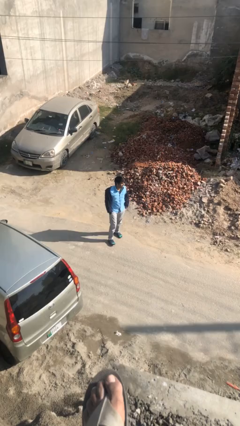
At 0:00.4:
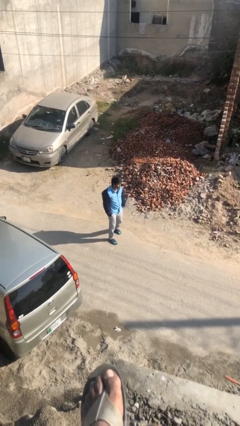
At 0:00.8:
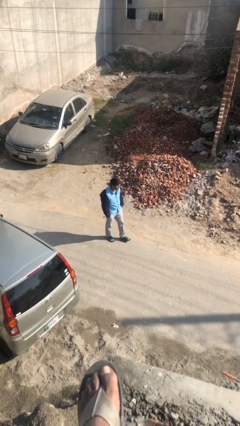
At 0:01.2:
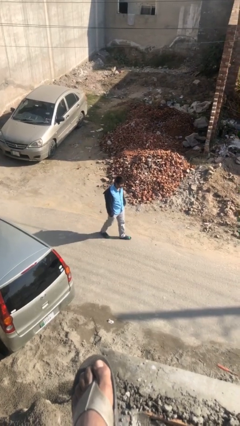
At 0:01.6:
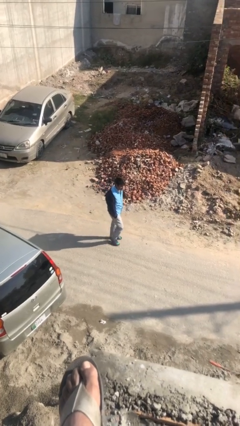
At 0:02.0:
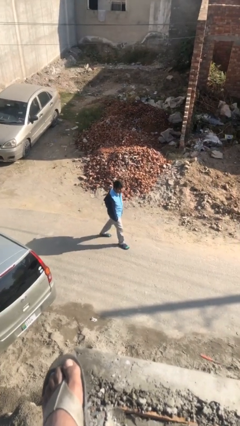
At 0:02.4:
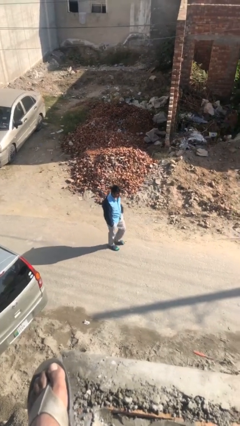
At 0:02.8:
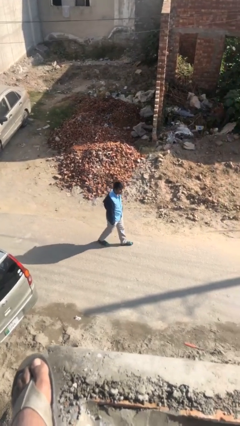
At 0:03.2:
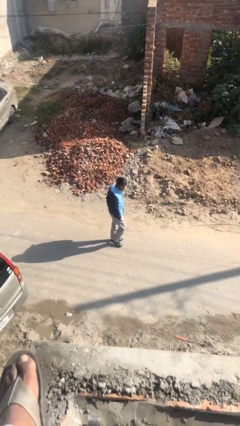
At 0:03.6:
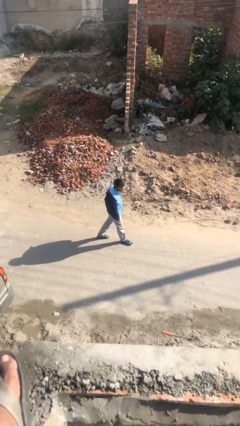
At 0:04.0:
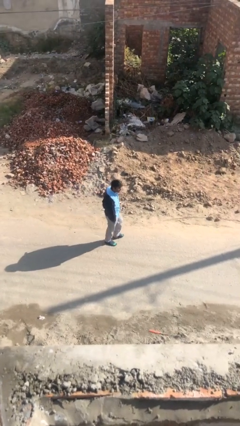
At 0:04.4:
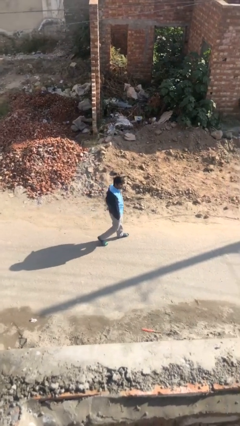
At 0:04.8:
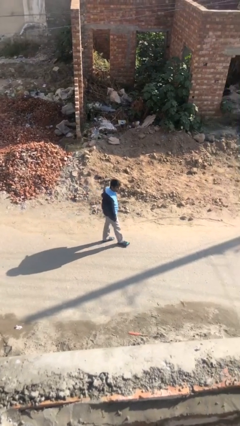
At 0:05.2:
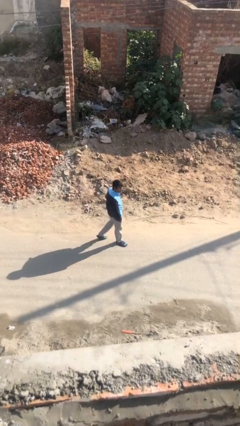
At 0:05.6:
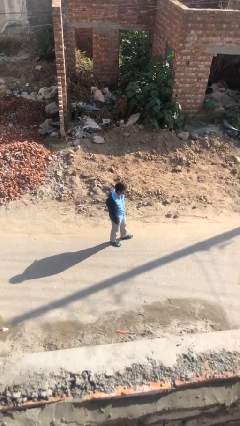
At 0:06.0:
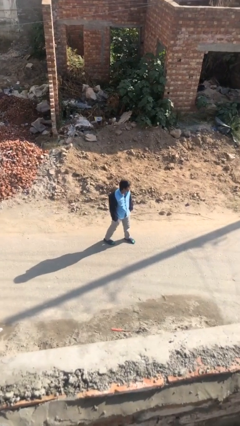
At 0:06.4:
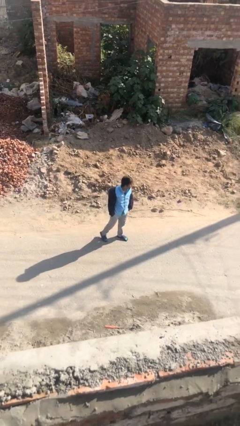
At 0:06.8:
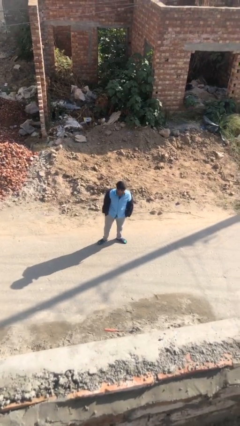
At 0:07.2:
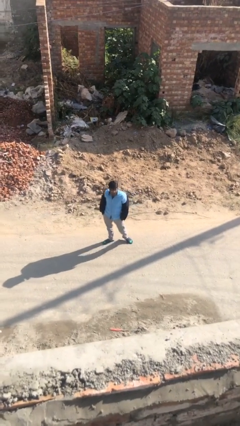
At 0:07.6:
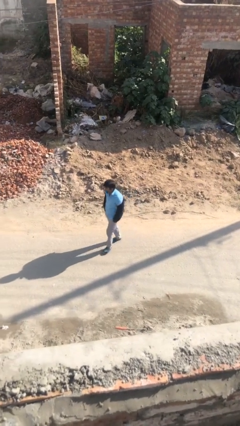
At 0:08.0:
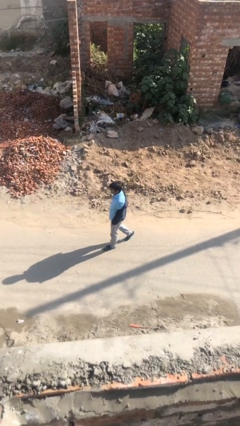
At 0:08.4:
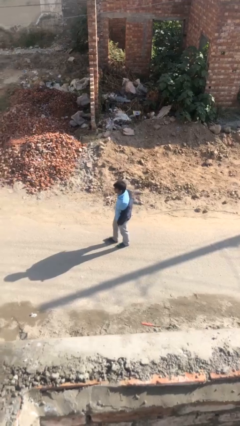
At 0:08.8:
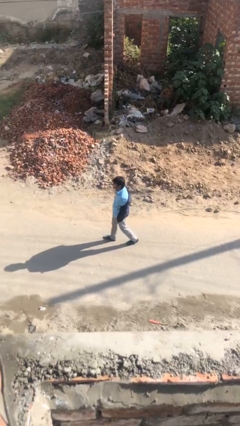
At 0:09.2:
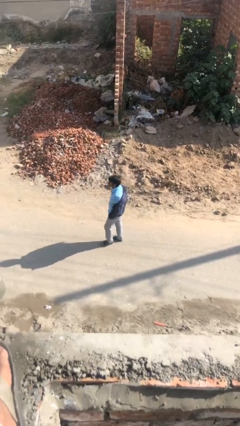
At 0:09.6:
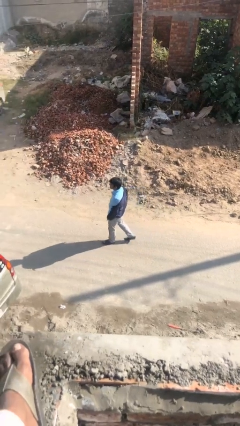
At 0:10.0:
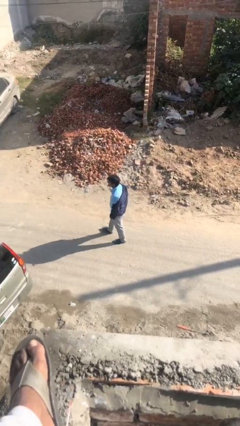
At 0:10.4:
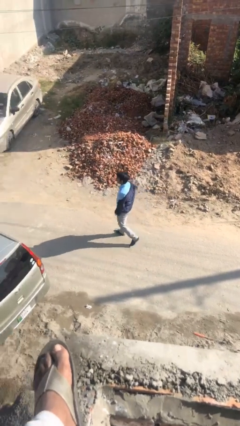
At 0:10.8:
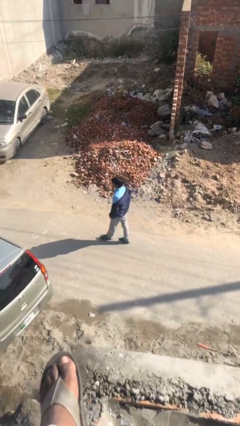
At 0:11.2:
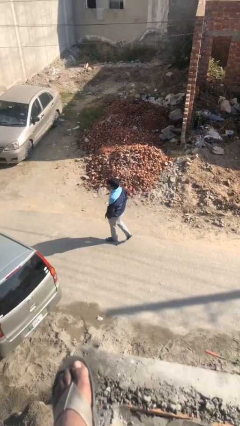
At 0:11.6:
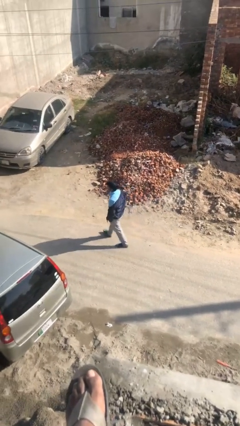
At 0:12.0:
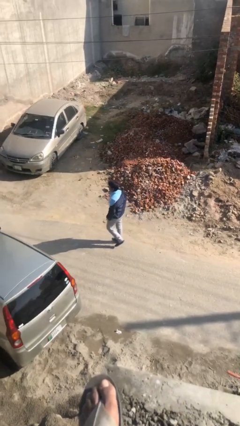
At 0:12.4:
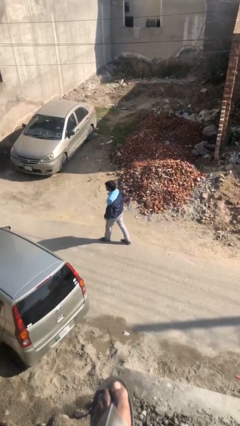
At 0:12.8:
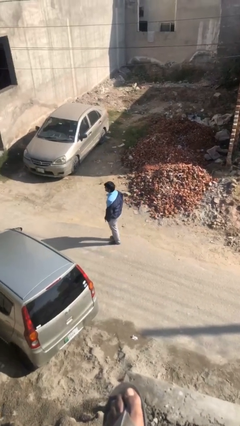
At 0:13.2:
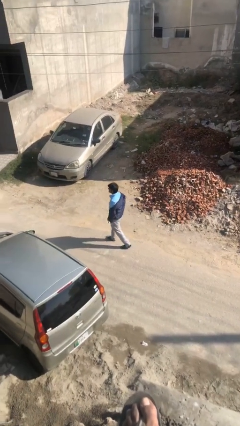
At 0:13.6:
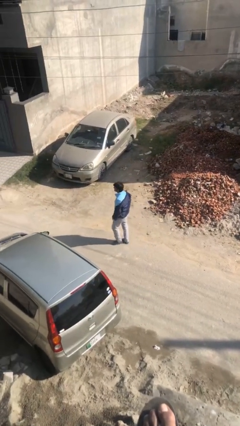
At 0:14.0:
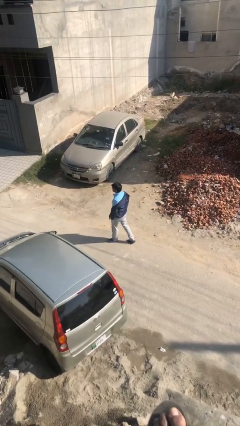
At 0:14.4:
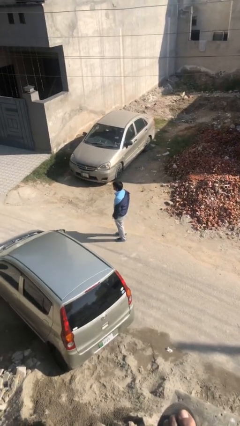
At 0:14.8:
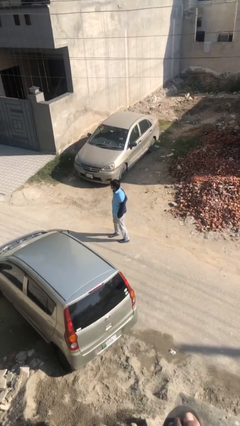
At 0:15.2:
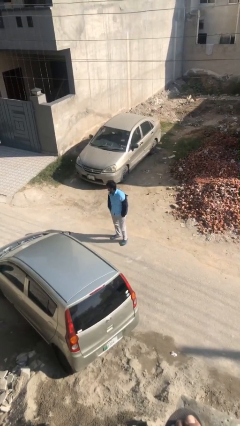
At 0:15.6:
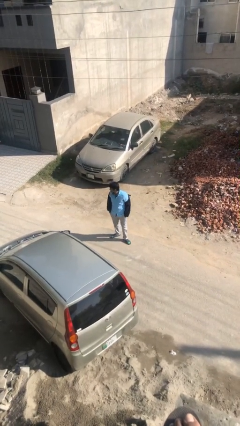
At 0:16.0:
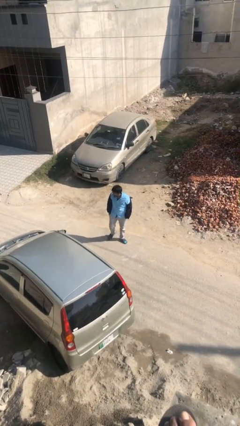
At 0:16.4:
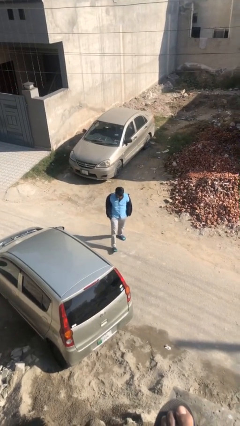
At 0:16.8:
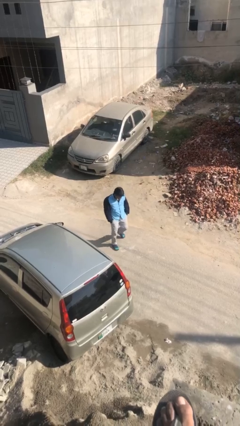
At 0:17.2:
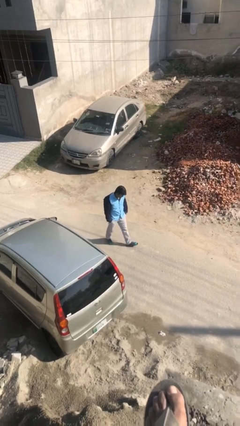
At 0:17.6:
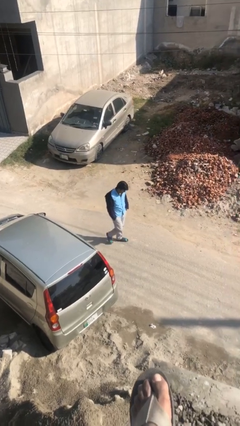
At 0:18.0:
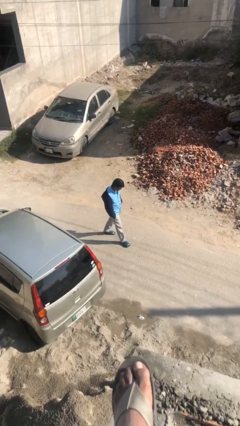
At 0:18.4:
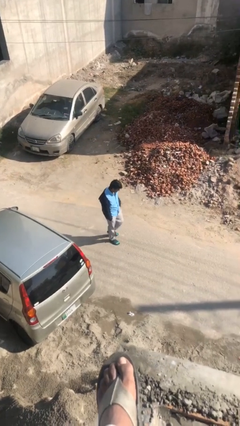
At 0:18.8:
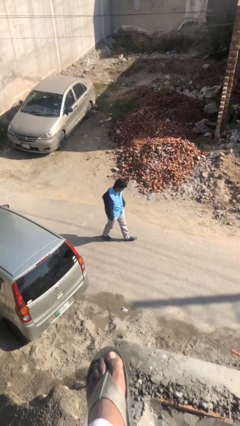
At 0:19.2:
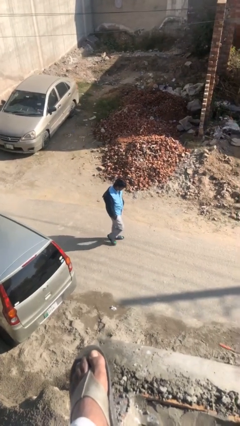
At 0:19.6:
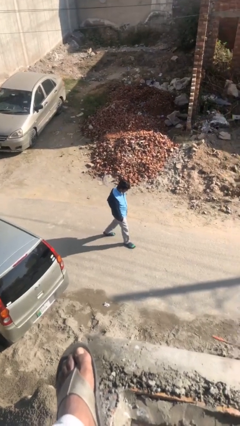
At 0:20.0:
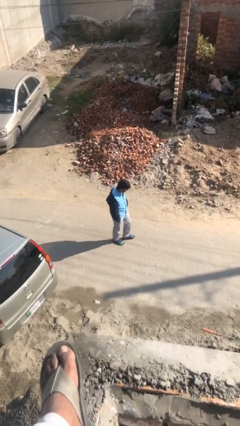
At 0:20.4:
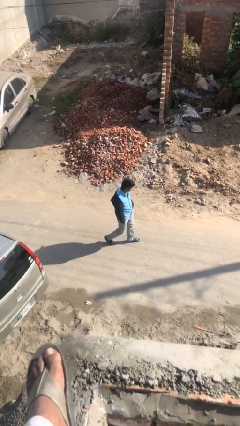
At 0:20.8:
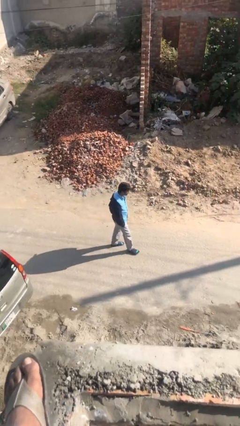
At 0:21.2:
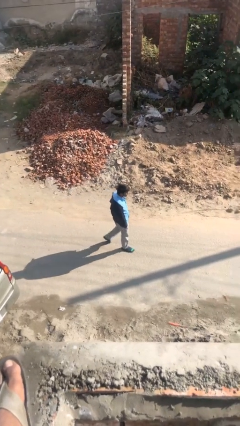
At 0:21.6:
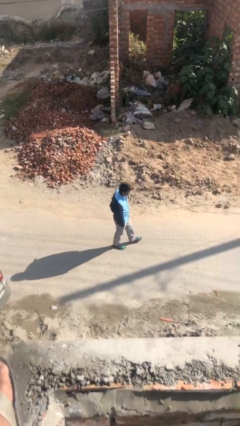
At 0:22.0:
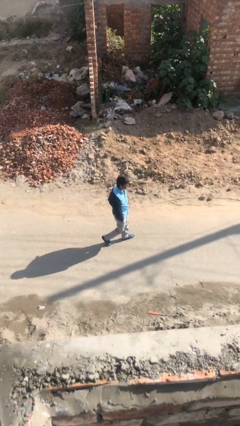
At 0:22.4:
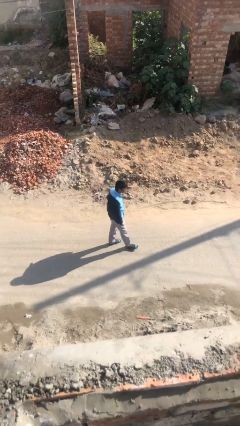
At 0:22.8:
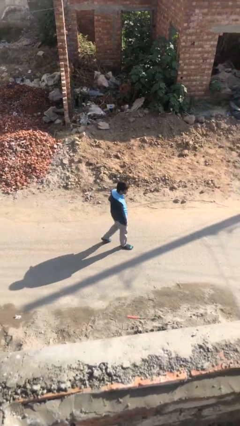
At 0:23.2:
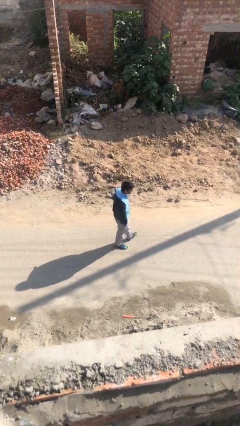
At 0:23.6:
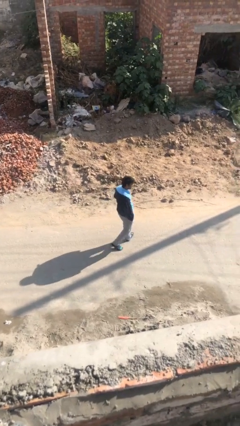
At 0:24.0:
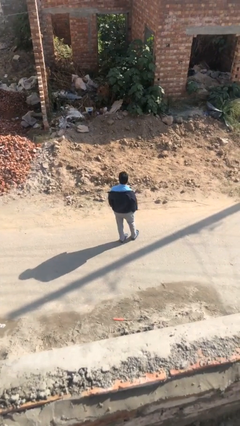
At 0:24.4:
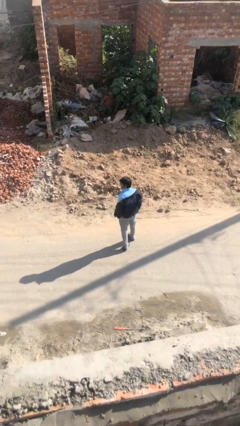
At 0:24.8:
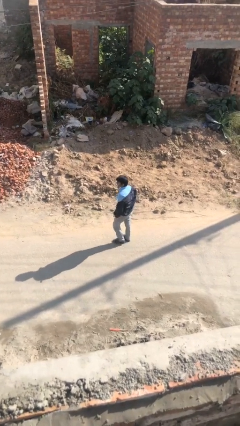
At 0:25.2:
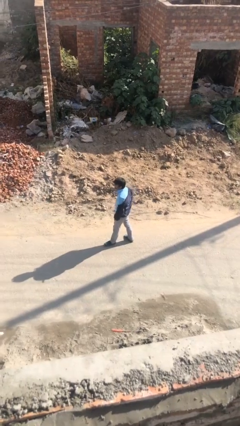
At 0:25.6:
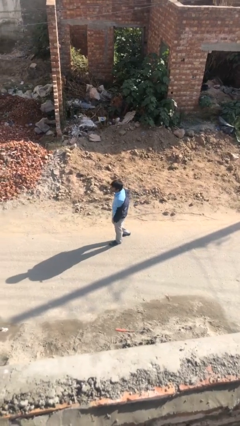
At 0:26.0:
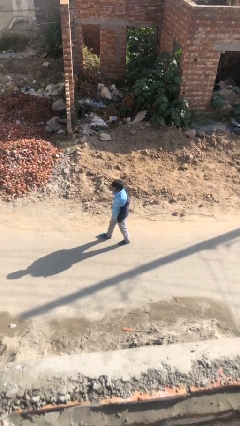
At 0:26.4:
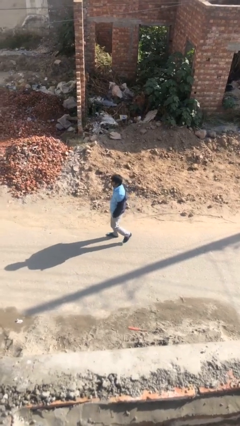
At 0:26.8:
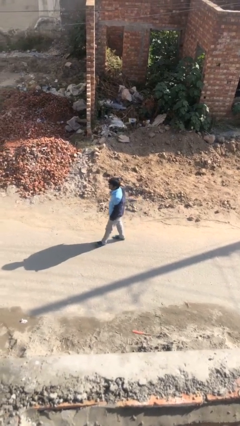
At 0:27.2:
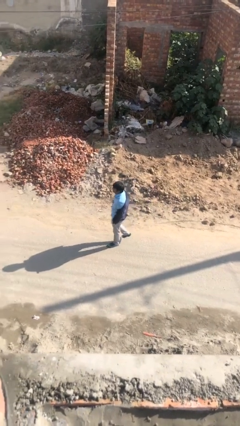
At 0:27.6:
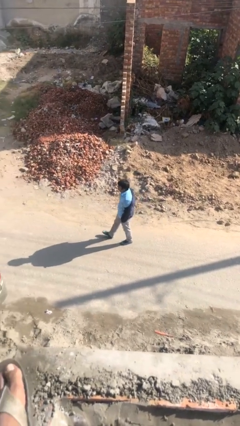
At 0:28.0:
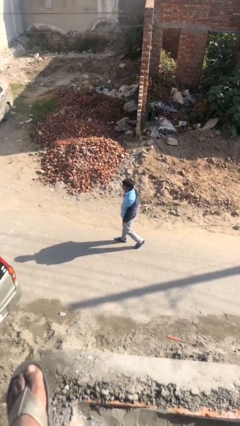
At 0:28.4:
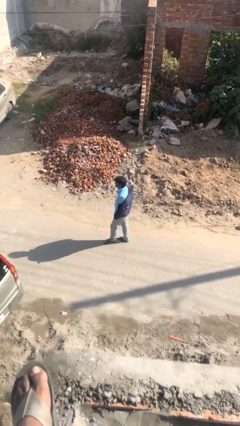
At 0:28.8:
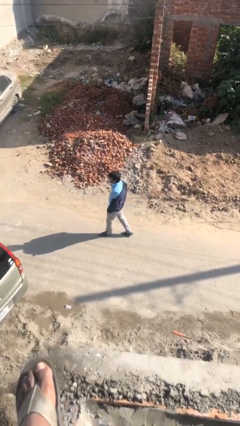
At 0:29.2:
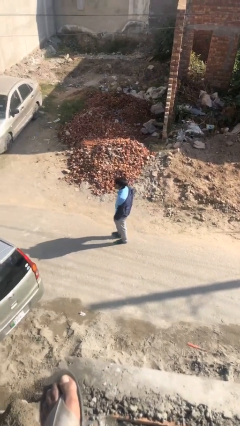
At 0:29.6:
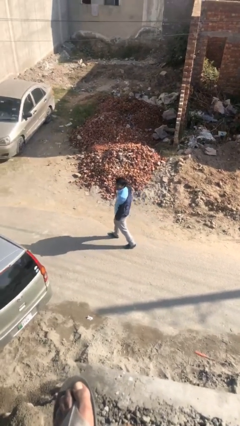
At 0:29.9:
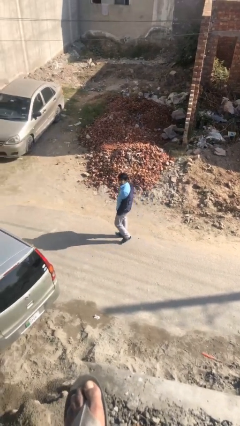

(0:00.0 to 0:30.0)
person walks

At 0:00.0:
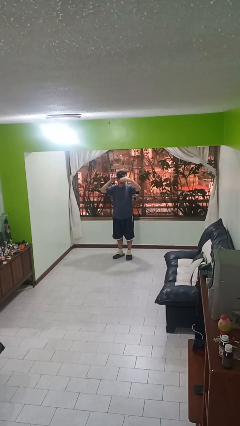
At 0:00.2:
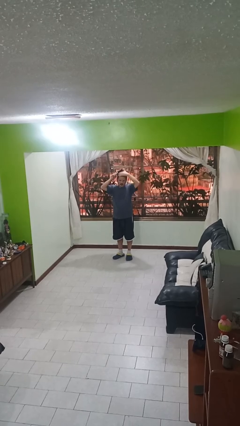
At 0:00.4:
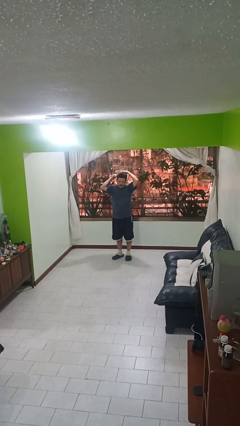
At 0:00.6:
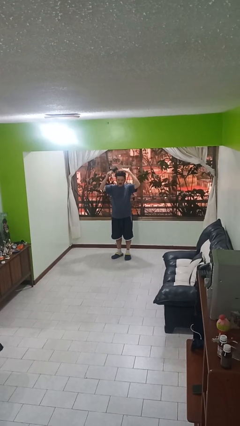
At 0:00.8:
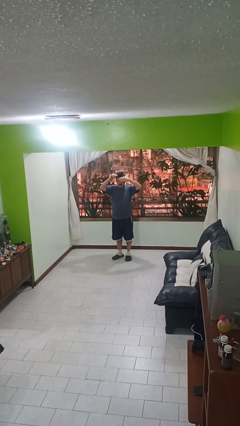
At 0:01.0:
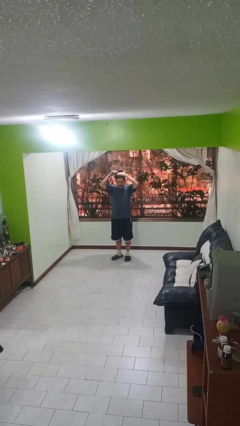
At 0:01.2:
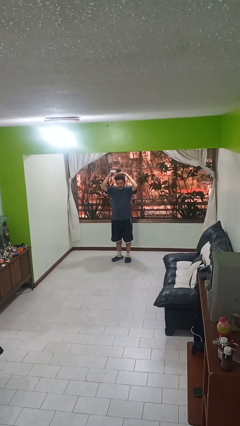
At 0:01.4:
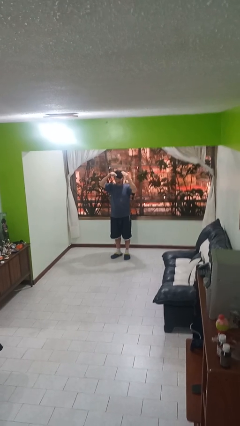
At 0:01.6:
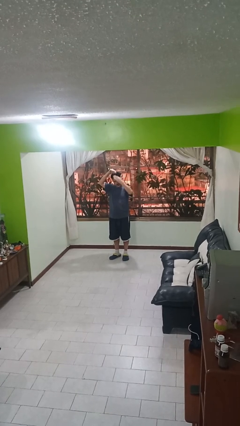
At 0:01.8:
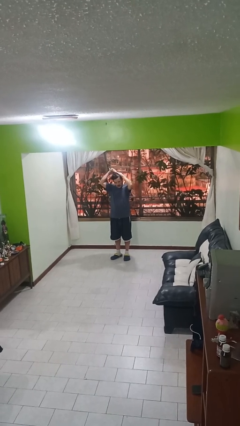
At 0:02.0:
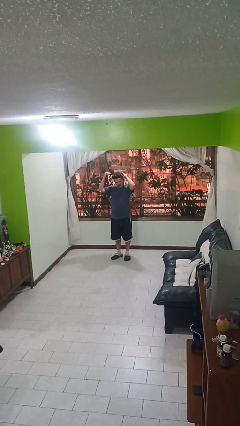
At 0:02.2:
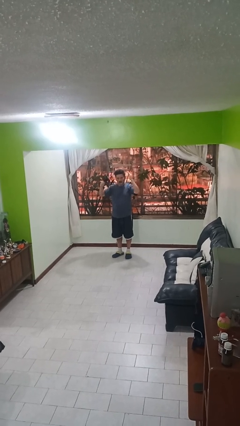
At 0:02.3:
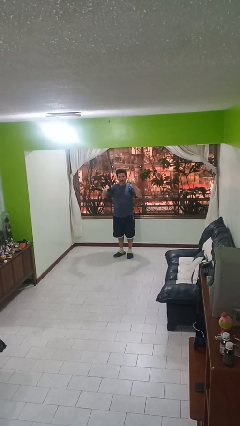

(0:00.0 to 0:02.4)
person brushes hair

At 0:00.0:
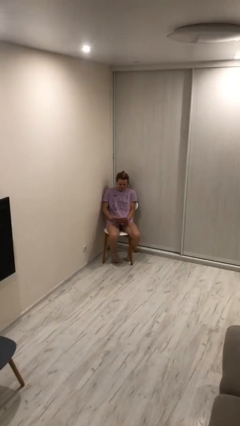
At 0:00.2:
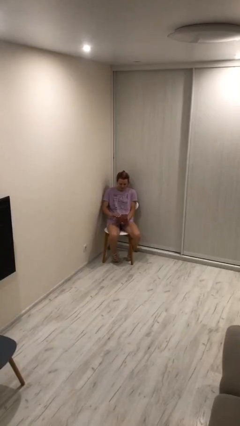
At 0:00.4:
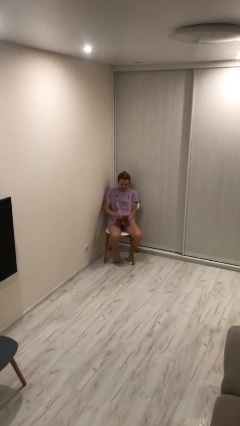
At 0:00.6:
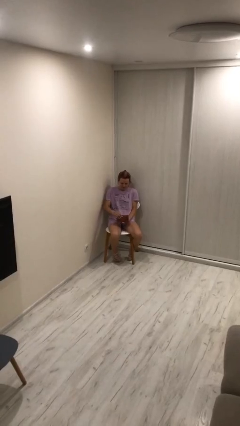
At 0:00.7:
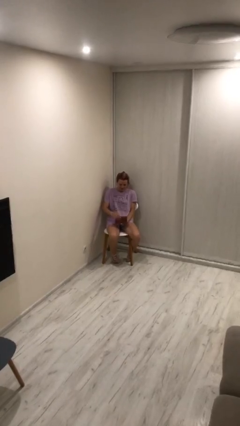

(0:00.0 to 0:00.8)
person opens jewelry box
